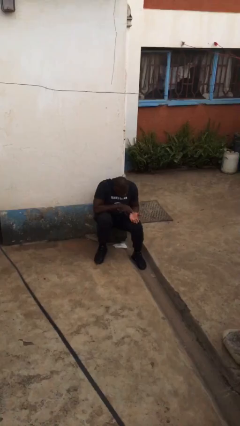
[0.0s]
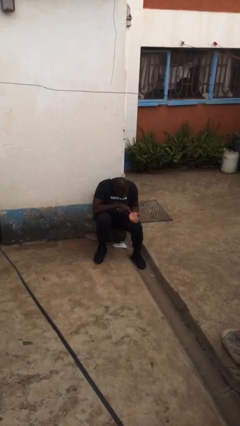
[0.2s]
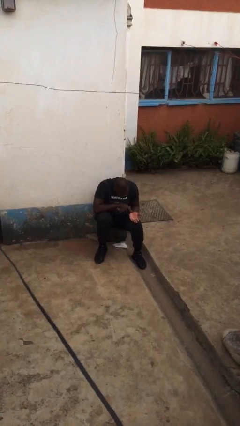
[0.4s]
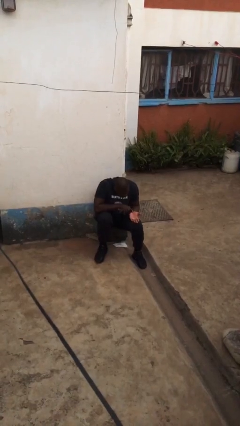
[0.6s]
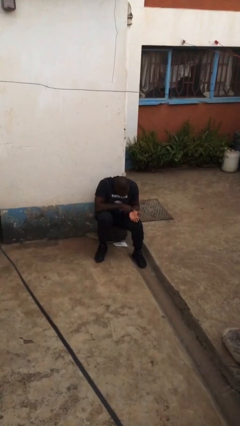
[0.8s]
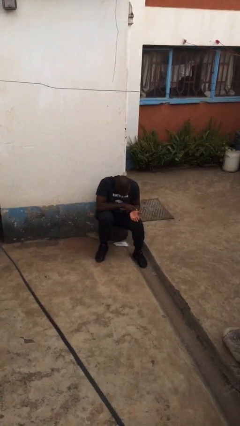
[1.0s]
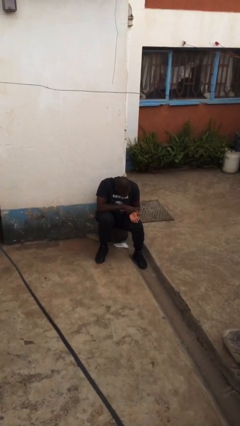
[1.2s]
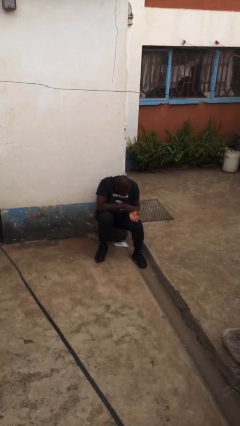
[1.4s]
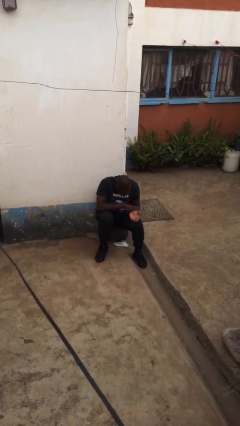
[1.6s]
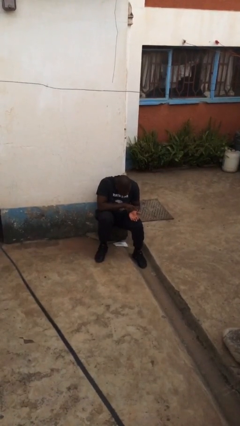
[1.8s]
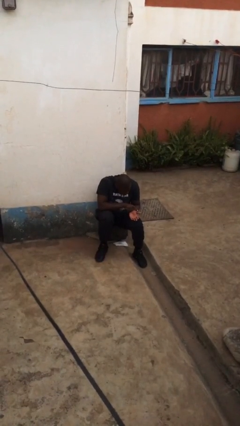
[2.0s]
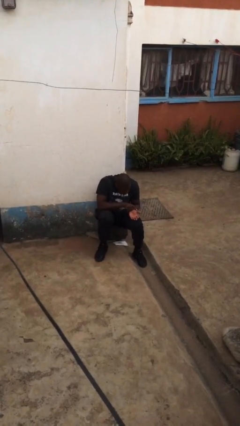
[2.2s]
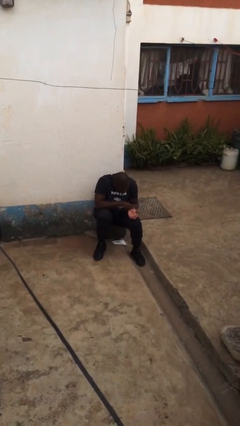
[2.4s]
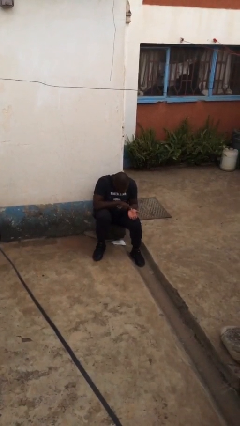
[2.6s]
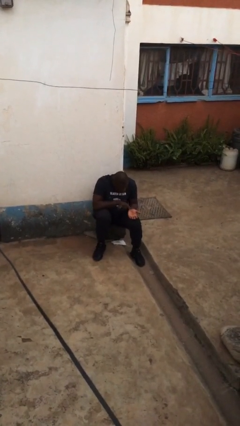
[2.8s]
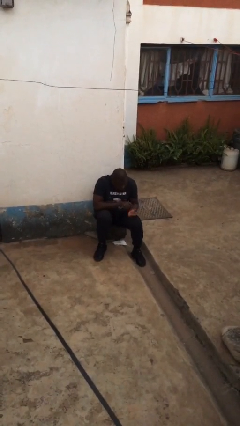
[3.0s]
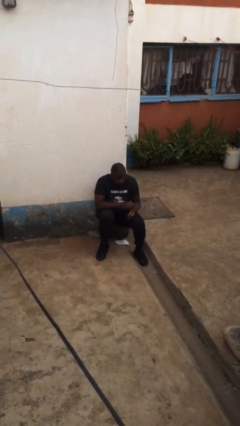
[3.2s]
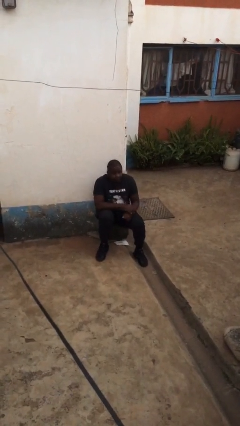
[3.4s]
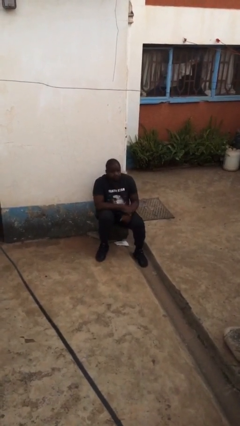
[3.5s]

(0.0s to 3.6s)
person looks at hands in lap

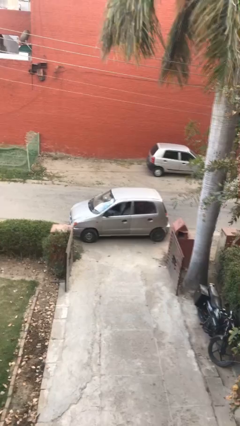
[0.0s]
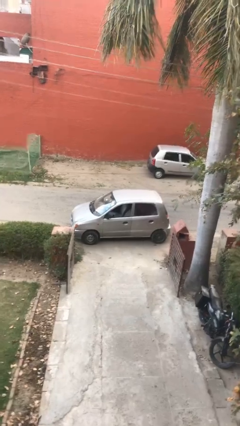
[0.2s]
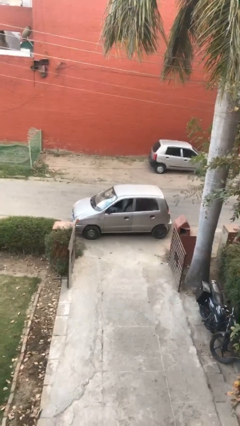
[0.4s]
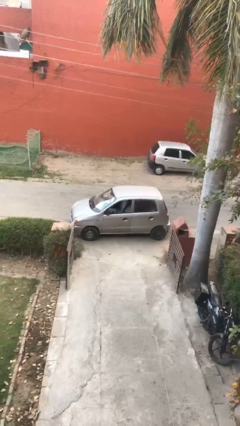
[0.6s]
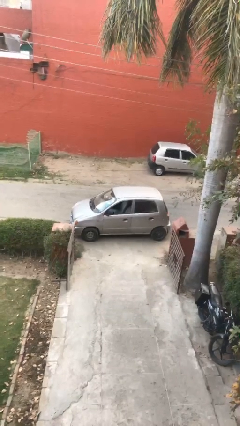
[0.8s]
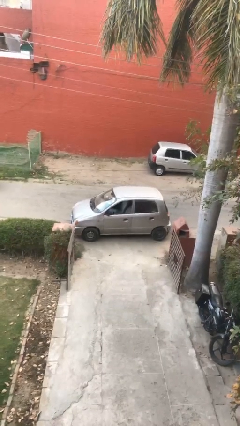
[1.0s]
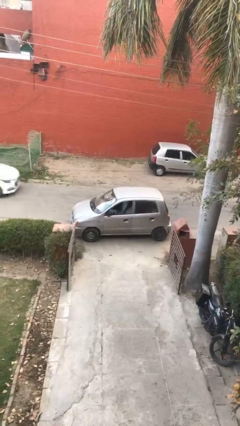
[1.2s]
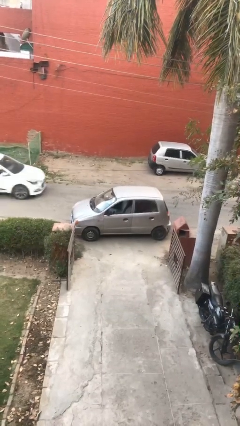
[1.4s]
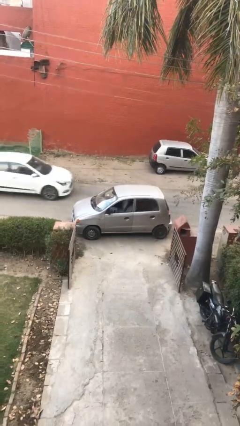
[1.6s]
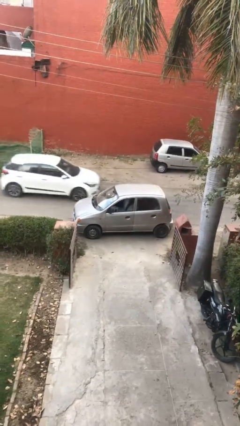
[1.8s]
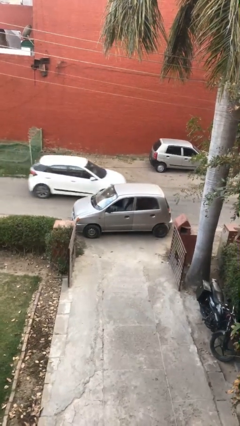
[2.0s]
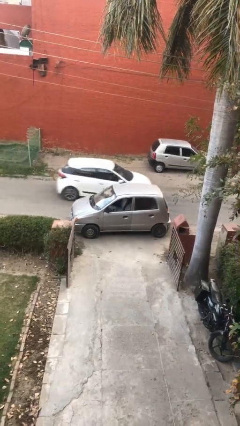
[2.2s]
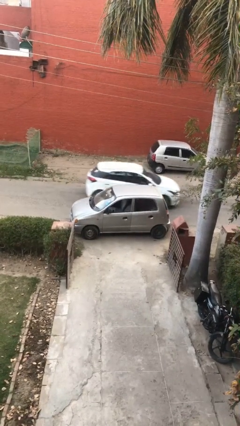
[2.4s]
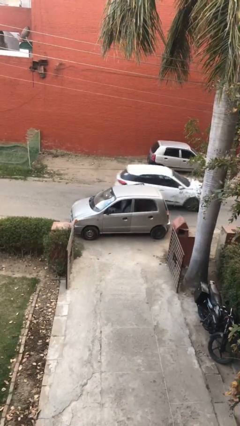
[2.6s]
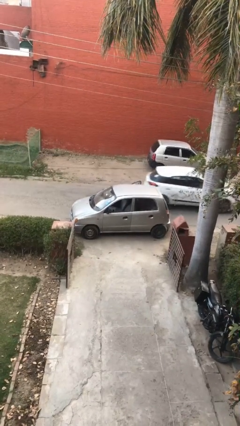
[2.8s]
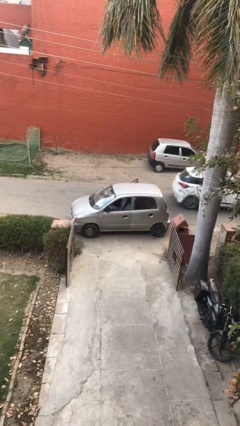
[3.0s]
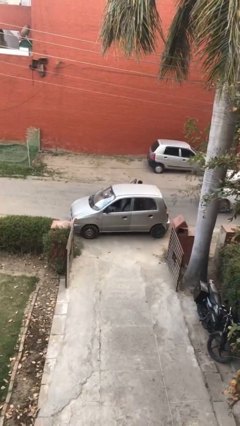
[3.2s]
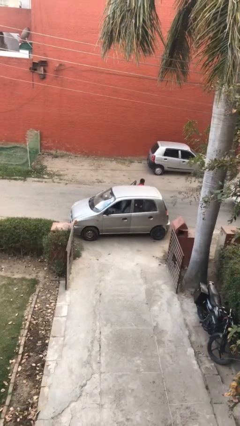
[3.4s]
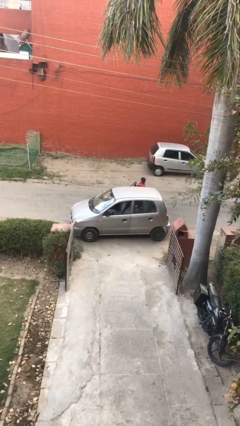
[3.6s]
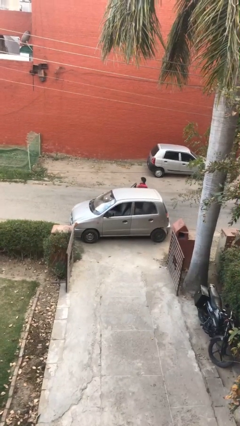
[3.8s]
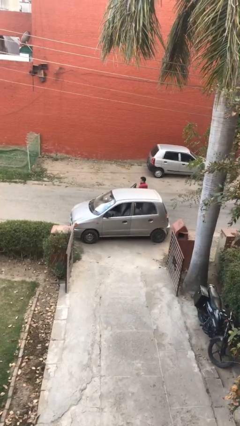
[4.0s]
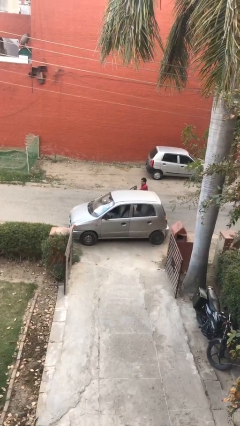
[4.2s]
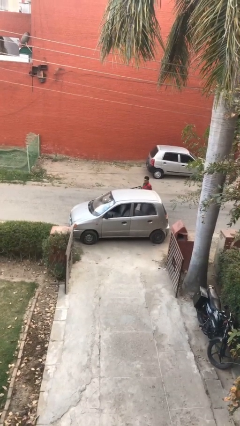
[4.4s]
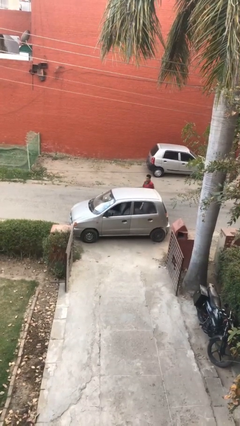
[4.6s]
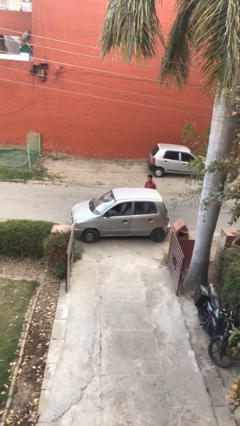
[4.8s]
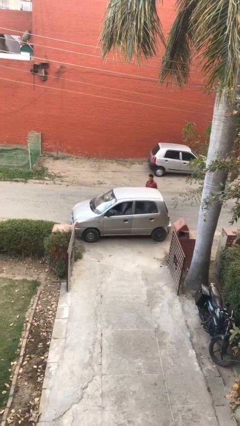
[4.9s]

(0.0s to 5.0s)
car drops off person

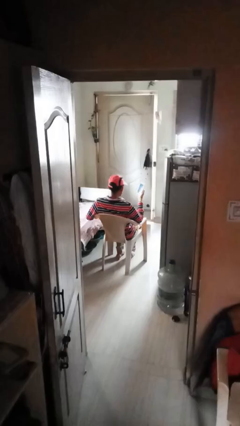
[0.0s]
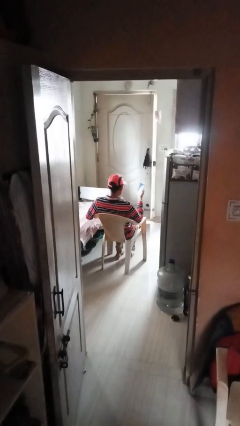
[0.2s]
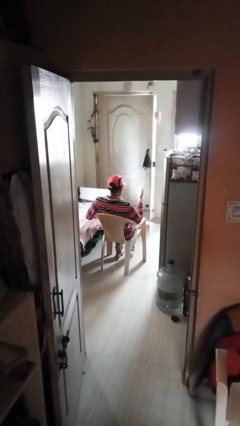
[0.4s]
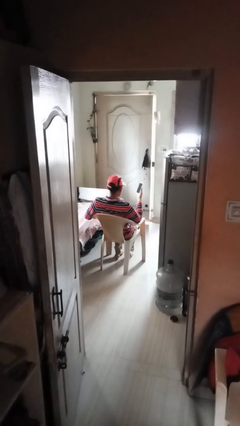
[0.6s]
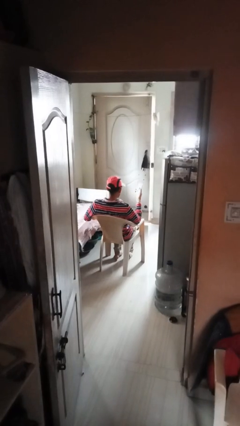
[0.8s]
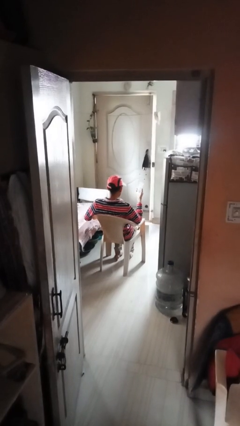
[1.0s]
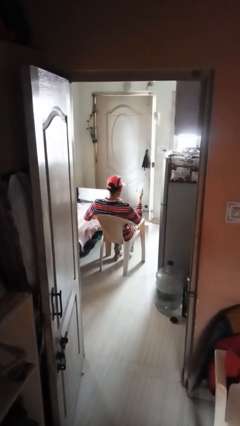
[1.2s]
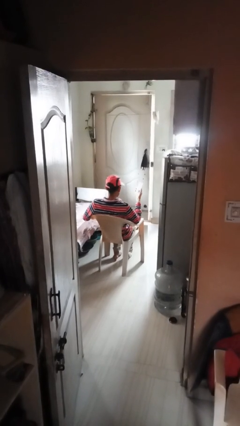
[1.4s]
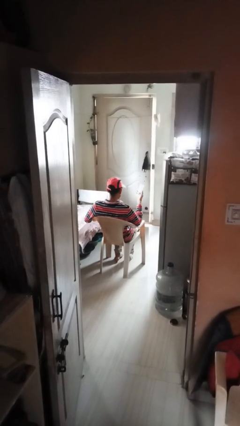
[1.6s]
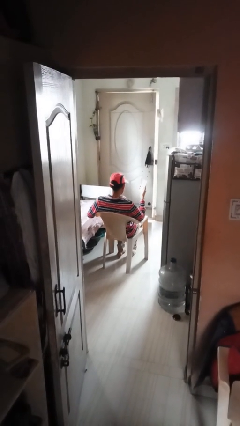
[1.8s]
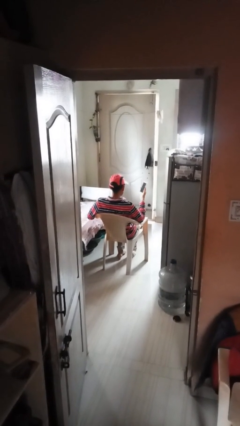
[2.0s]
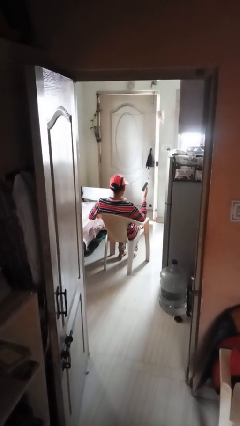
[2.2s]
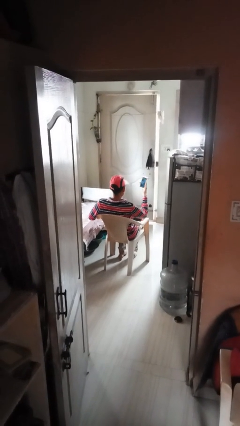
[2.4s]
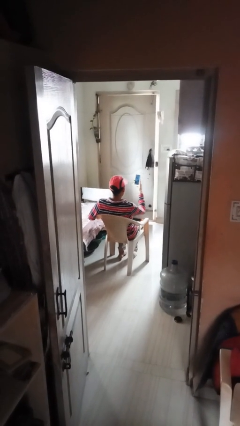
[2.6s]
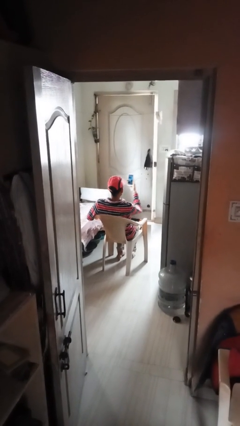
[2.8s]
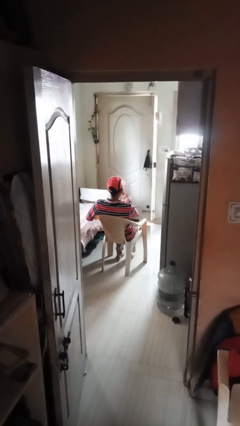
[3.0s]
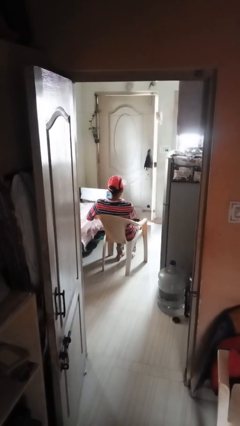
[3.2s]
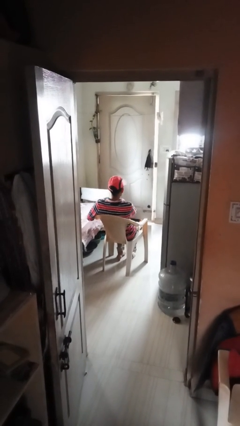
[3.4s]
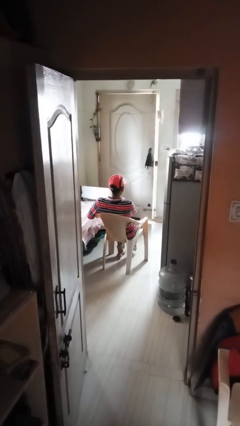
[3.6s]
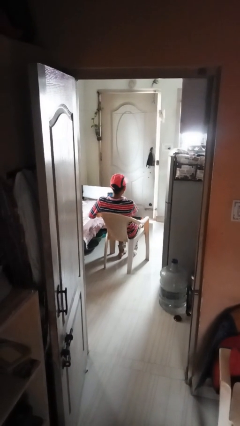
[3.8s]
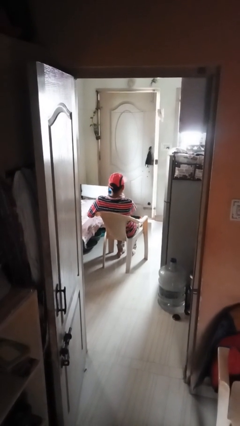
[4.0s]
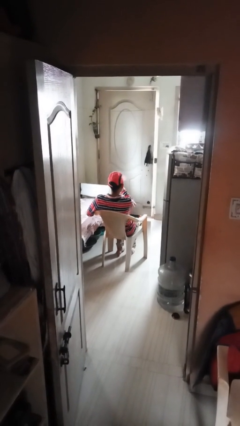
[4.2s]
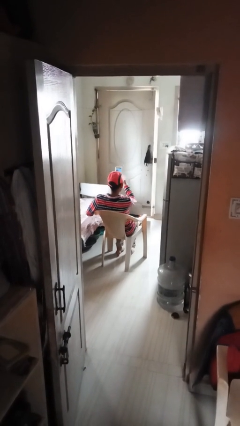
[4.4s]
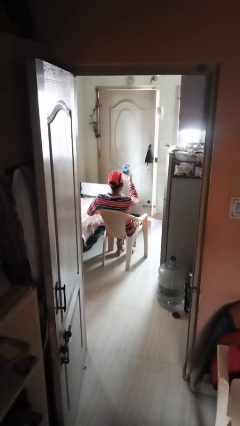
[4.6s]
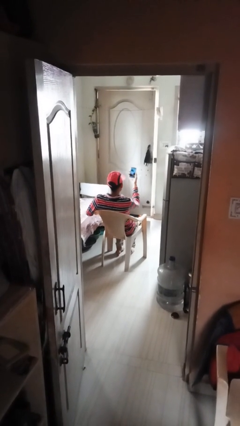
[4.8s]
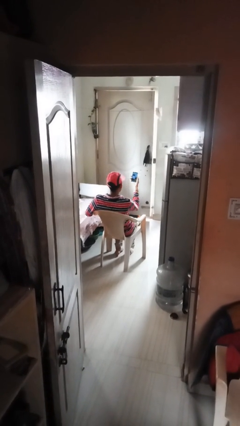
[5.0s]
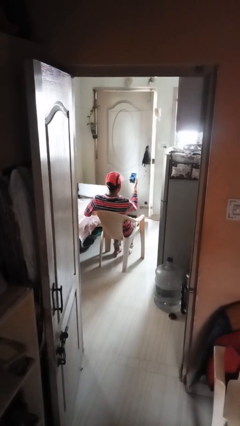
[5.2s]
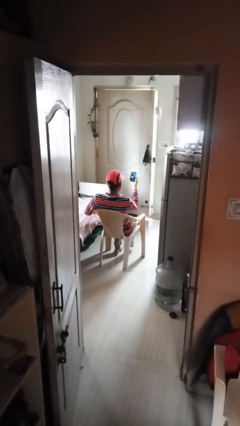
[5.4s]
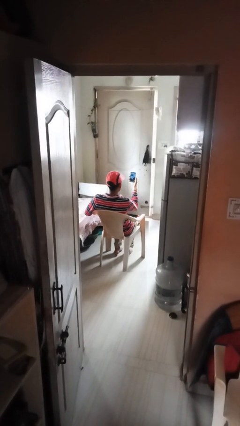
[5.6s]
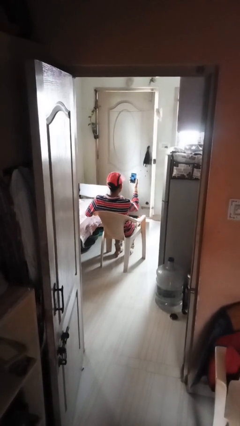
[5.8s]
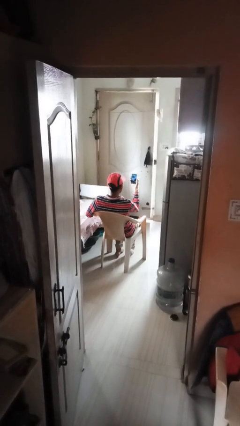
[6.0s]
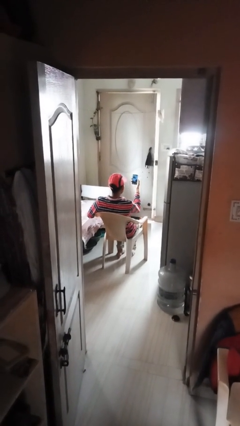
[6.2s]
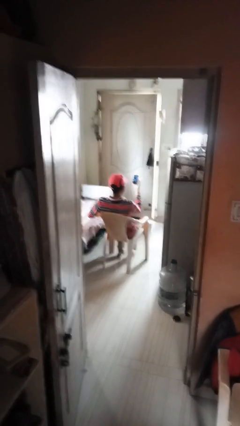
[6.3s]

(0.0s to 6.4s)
person takes phone from pocket

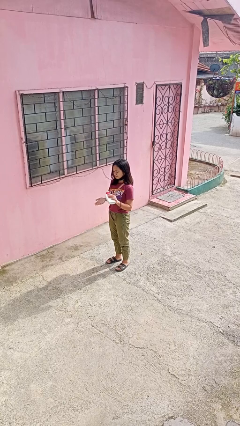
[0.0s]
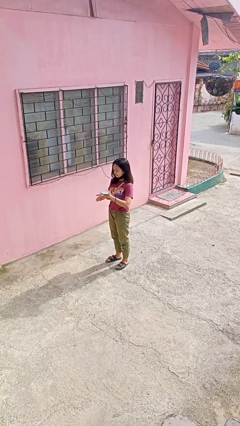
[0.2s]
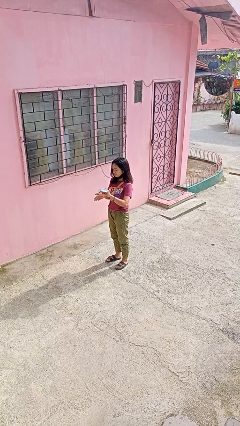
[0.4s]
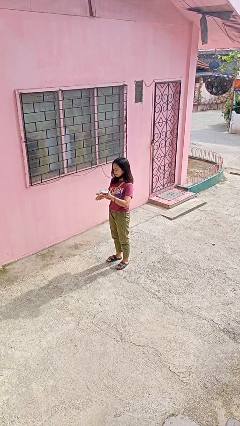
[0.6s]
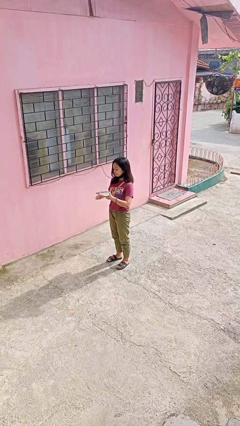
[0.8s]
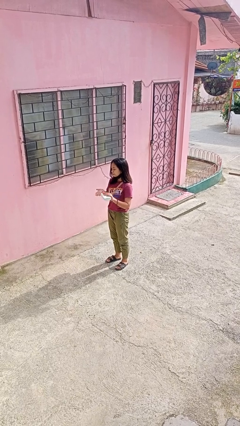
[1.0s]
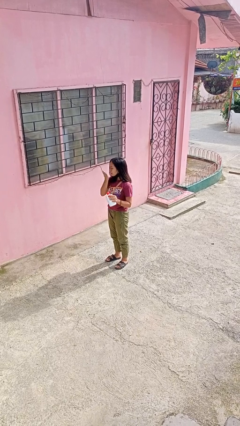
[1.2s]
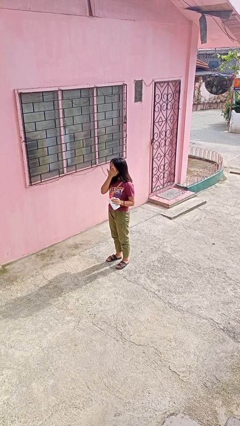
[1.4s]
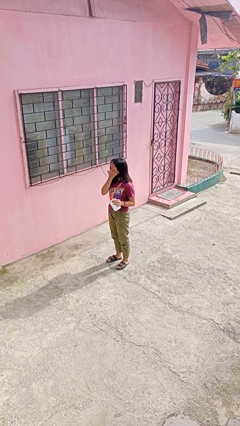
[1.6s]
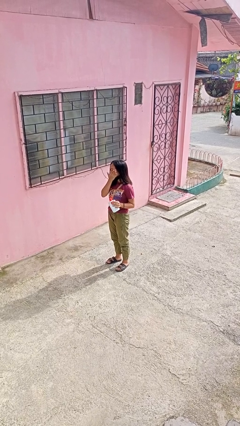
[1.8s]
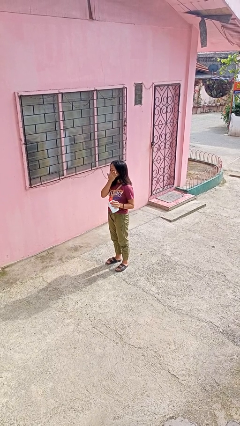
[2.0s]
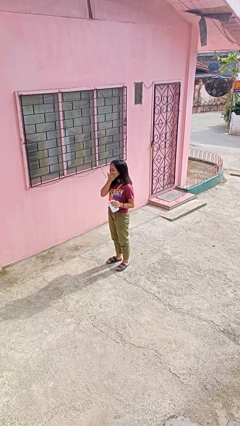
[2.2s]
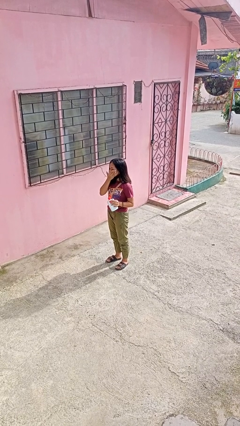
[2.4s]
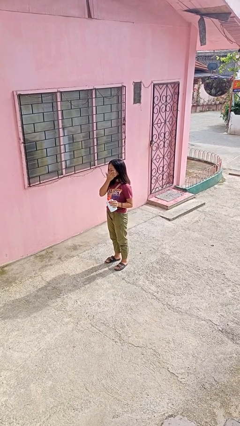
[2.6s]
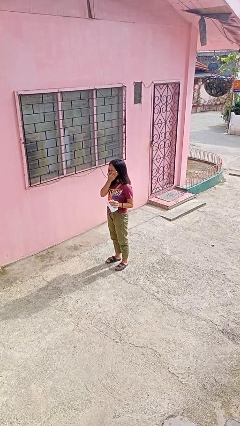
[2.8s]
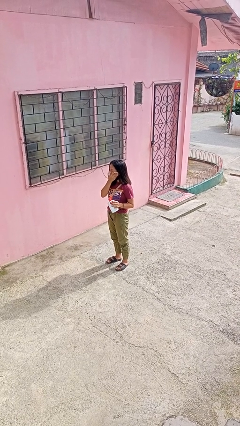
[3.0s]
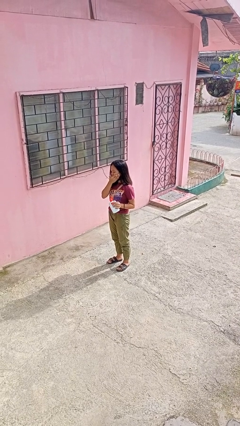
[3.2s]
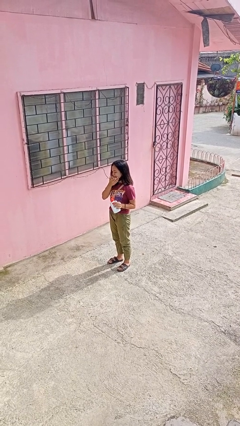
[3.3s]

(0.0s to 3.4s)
person applies facial moisturizer
